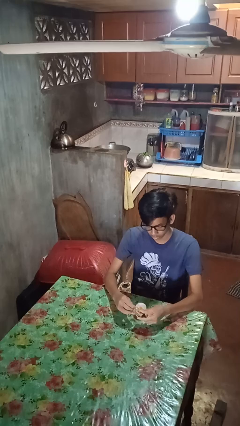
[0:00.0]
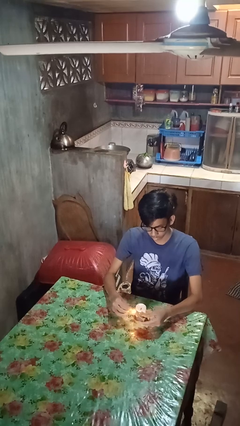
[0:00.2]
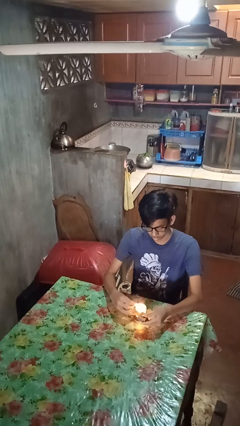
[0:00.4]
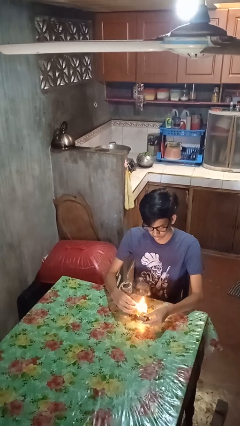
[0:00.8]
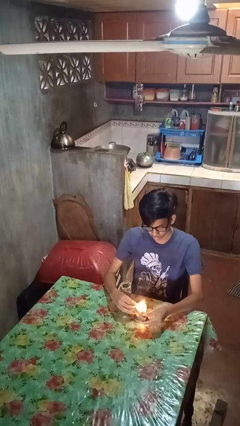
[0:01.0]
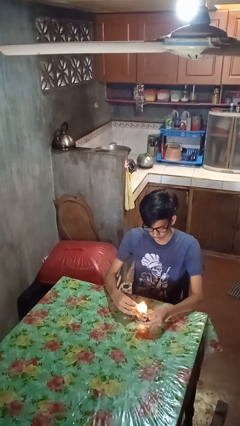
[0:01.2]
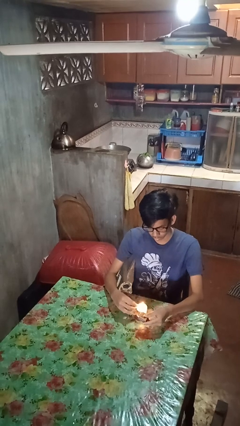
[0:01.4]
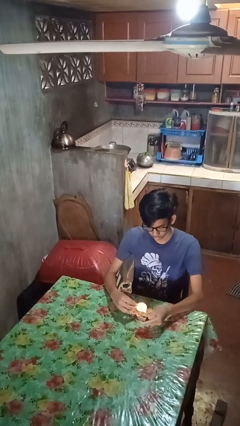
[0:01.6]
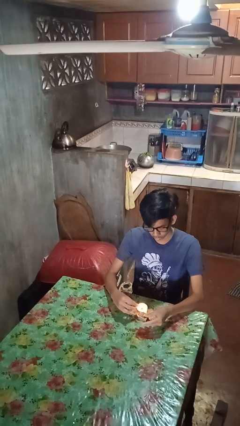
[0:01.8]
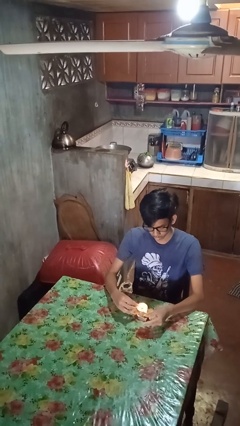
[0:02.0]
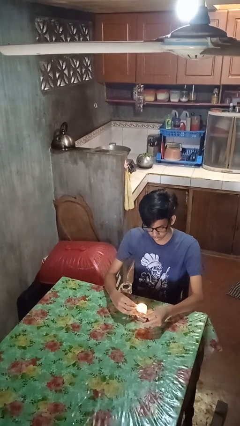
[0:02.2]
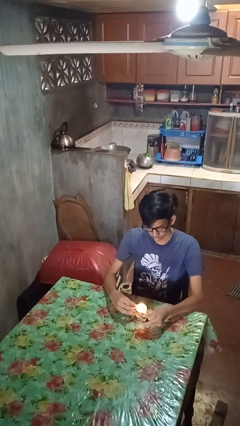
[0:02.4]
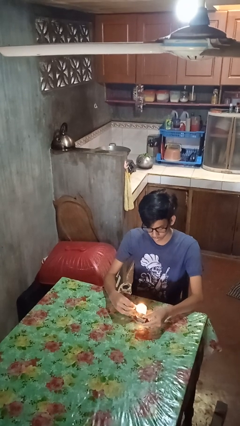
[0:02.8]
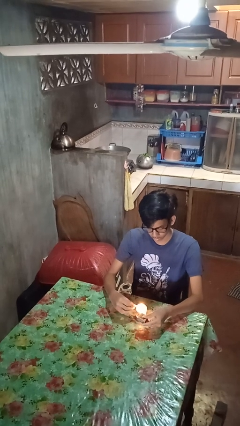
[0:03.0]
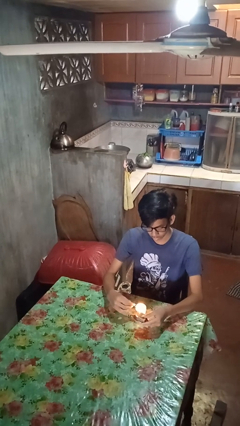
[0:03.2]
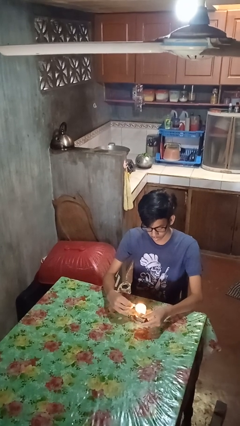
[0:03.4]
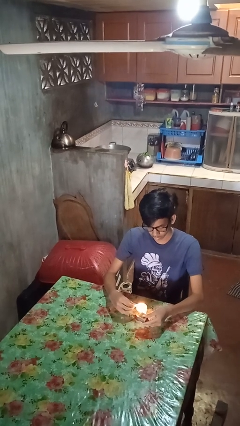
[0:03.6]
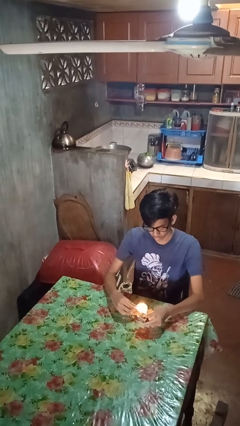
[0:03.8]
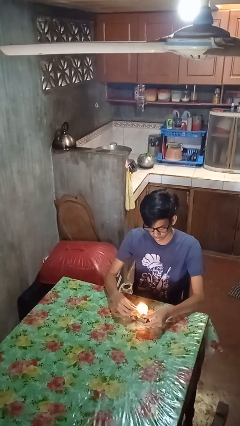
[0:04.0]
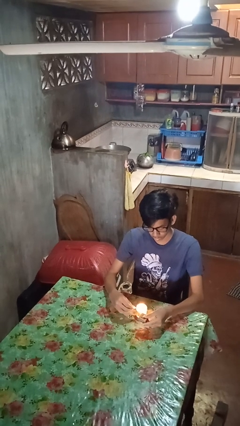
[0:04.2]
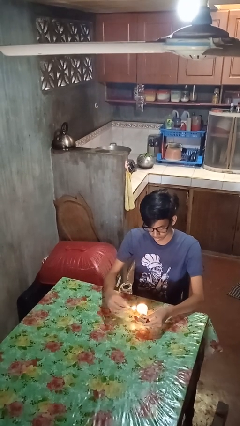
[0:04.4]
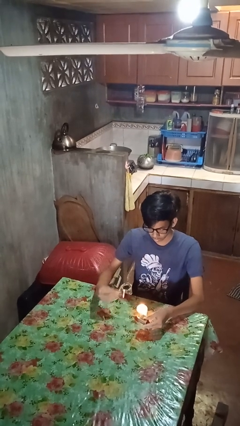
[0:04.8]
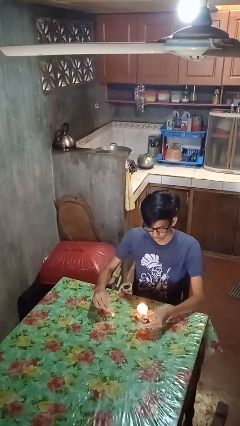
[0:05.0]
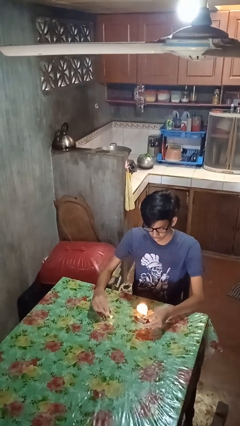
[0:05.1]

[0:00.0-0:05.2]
person lights candle

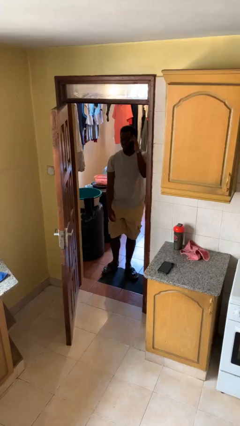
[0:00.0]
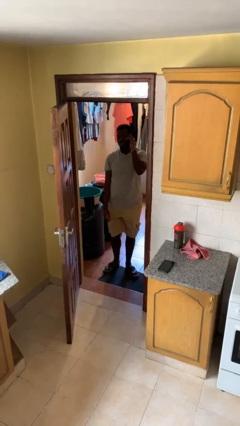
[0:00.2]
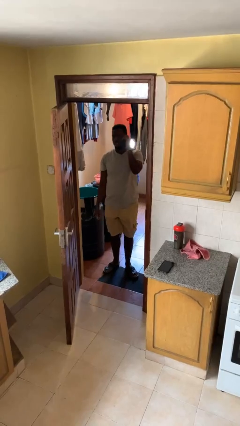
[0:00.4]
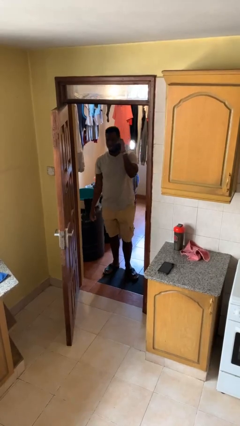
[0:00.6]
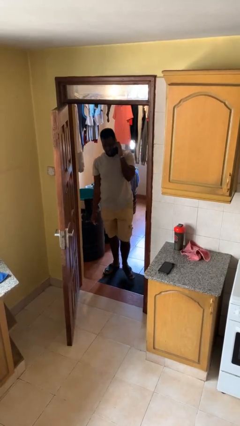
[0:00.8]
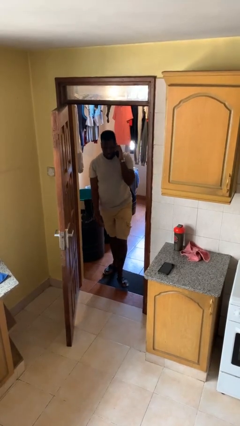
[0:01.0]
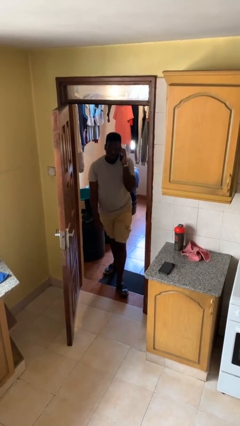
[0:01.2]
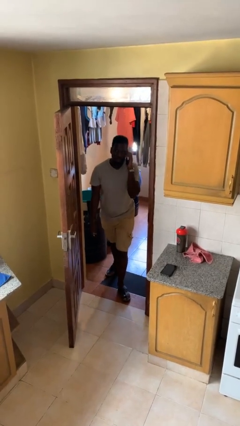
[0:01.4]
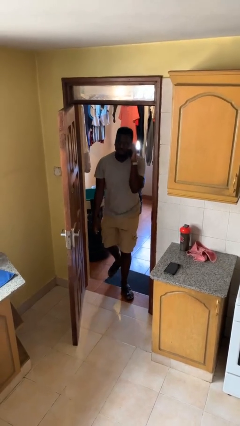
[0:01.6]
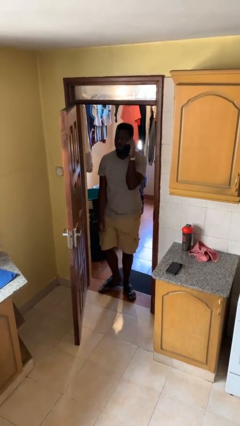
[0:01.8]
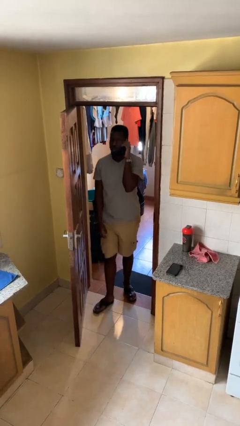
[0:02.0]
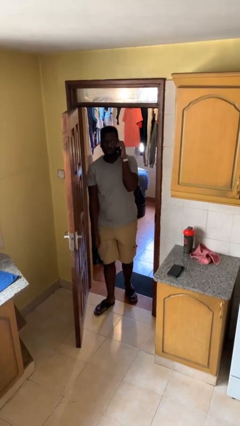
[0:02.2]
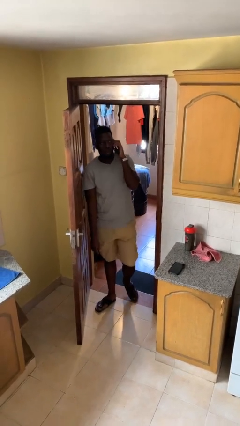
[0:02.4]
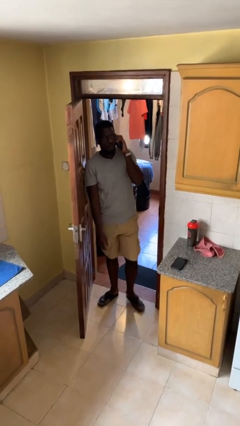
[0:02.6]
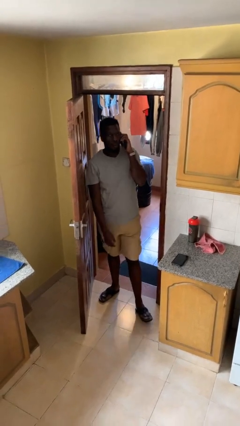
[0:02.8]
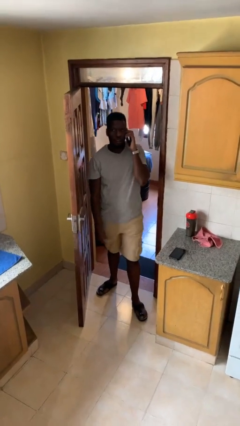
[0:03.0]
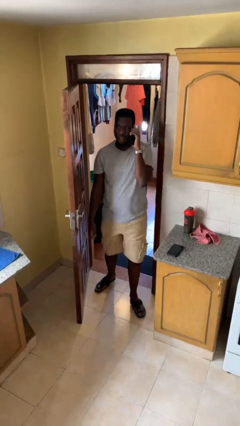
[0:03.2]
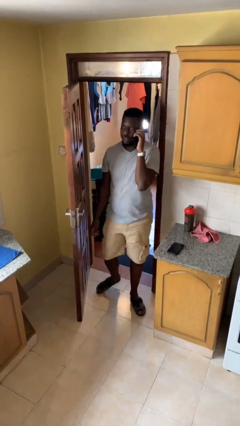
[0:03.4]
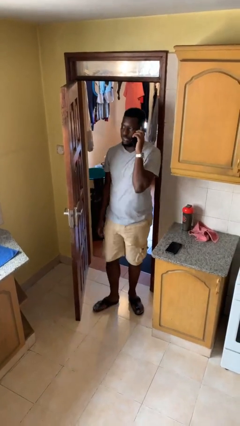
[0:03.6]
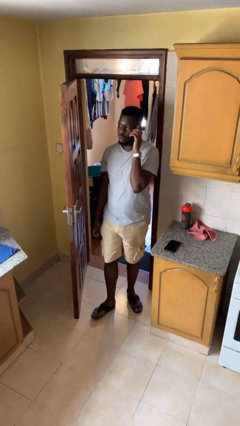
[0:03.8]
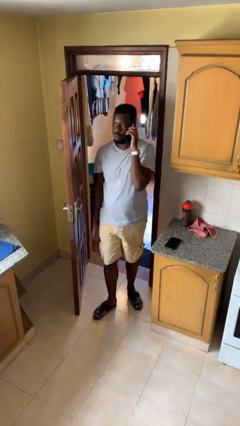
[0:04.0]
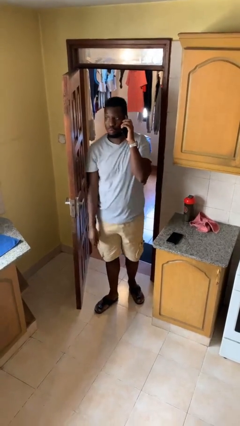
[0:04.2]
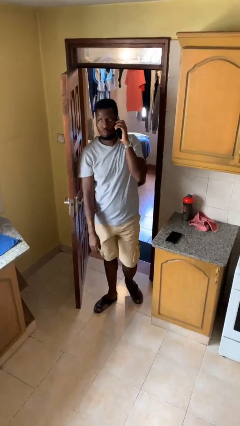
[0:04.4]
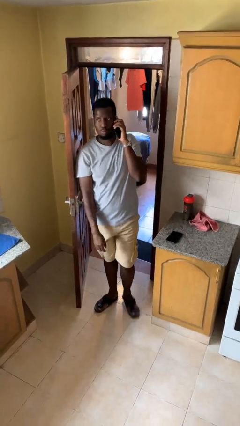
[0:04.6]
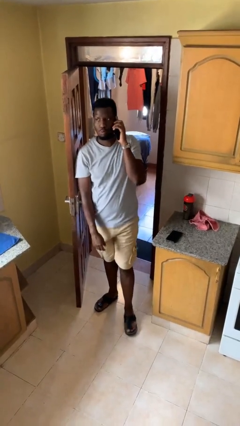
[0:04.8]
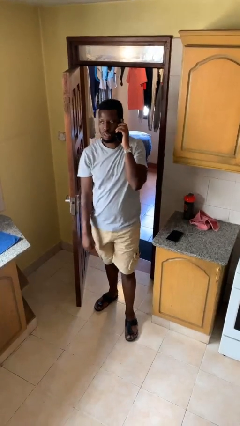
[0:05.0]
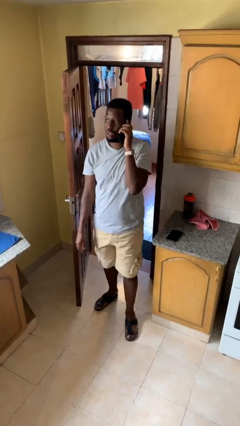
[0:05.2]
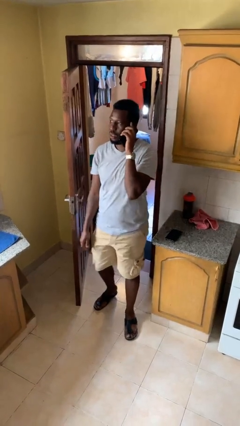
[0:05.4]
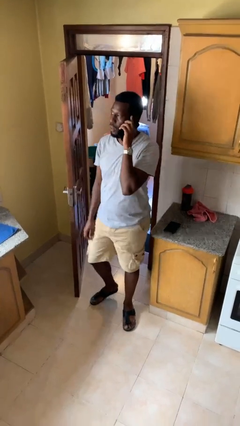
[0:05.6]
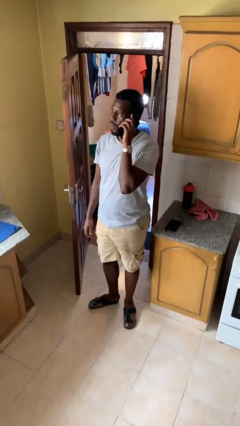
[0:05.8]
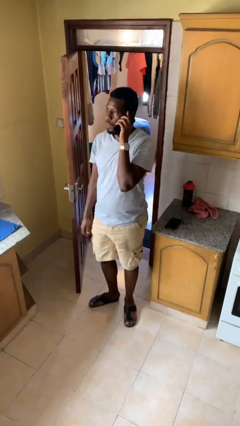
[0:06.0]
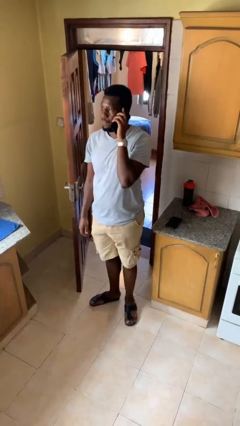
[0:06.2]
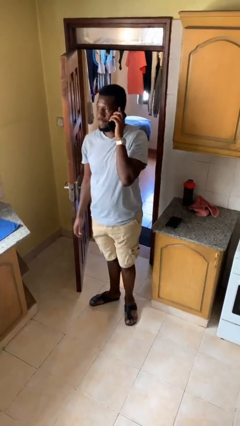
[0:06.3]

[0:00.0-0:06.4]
person enters scene through structure

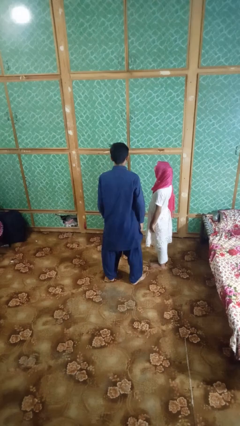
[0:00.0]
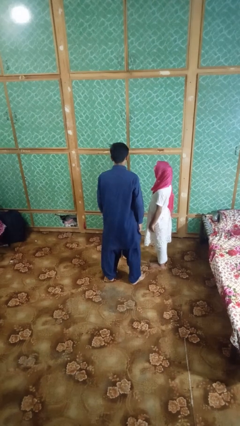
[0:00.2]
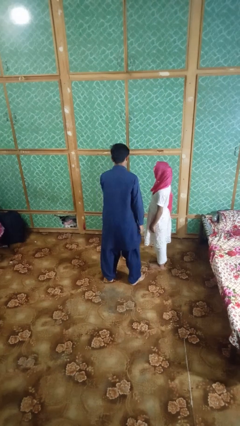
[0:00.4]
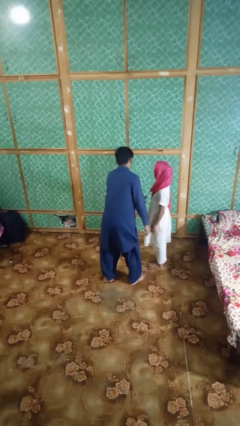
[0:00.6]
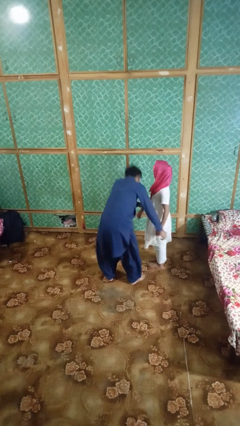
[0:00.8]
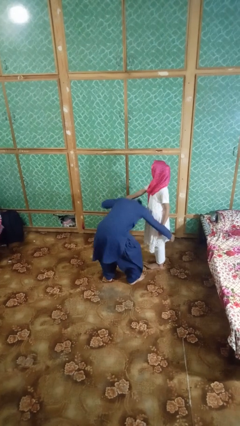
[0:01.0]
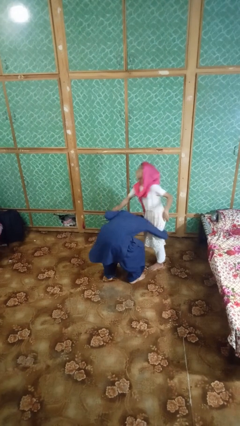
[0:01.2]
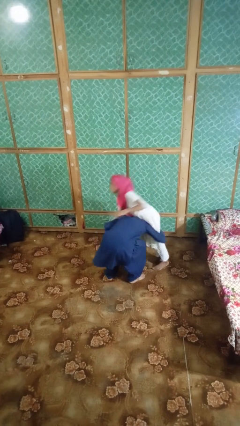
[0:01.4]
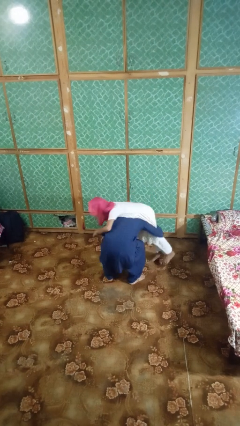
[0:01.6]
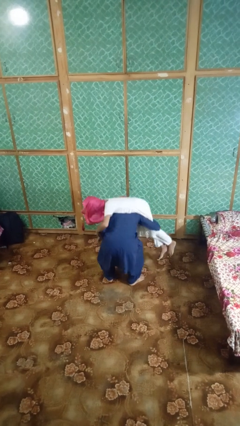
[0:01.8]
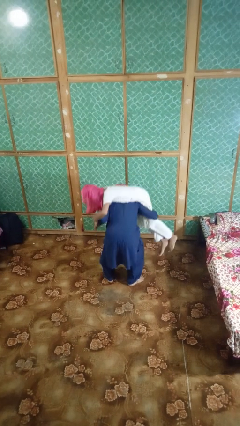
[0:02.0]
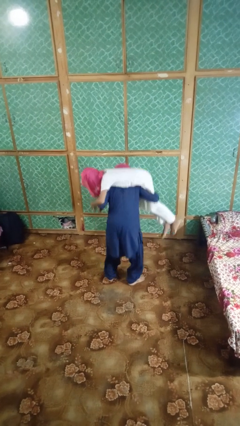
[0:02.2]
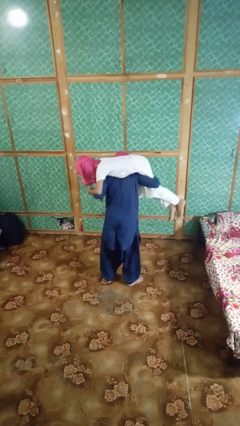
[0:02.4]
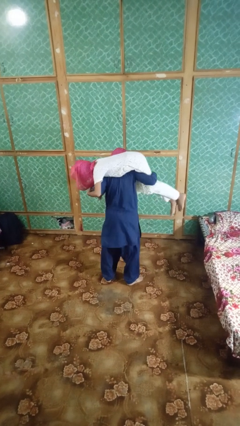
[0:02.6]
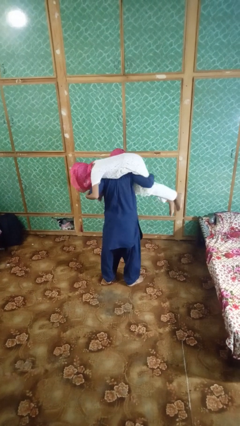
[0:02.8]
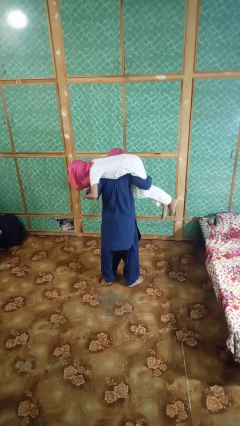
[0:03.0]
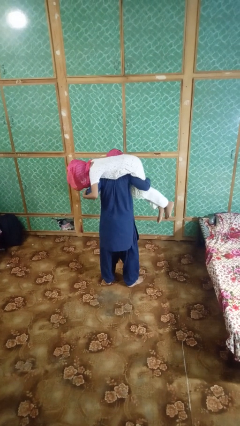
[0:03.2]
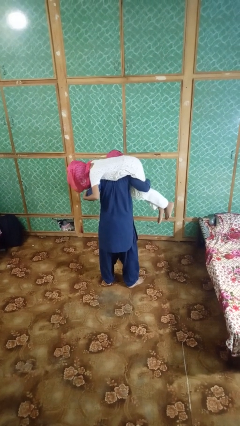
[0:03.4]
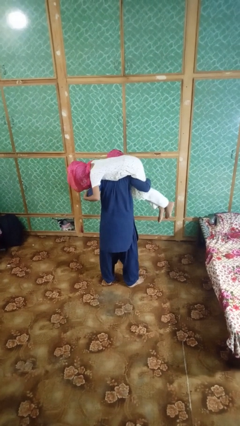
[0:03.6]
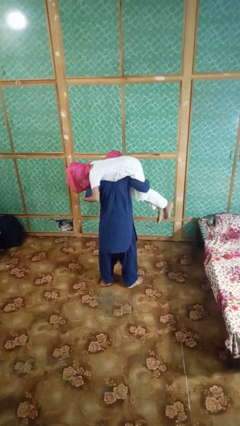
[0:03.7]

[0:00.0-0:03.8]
person carries person on shoulders

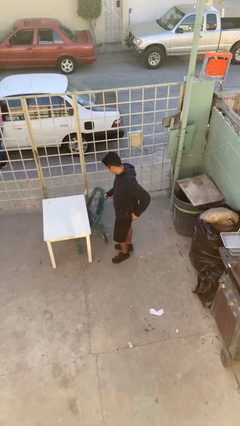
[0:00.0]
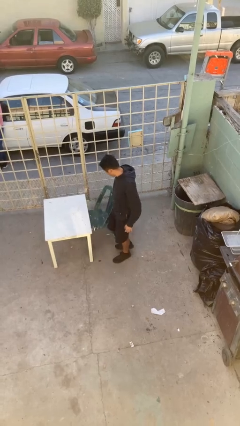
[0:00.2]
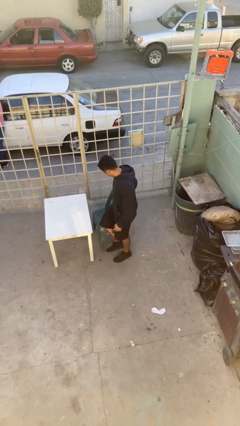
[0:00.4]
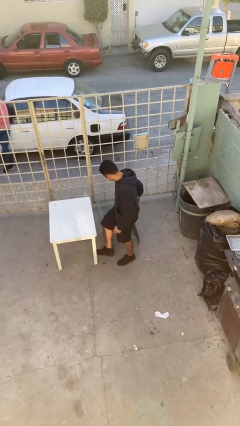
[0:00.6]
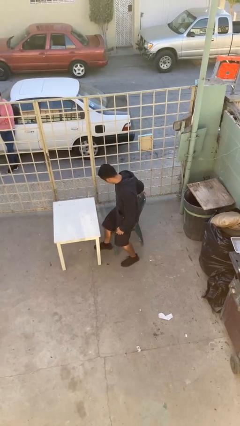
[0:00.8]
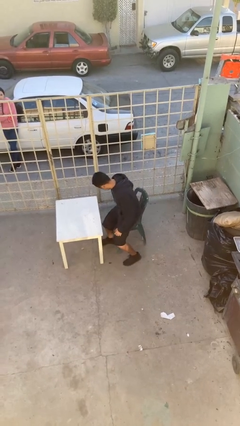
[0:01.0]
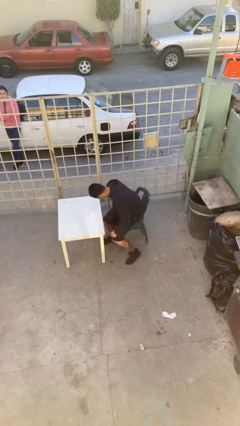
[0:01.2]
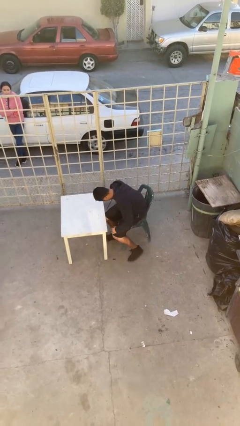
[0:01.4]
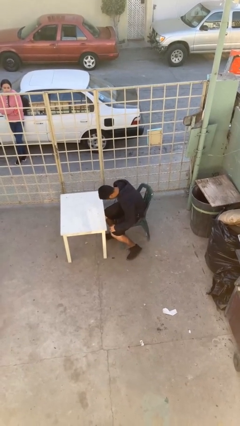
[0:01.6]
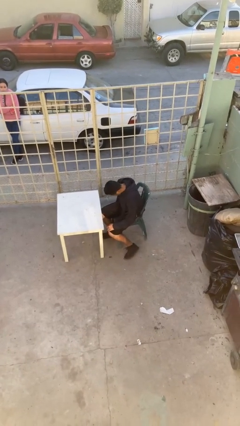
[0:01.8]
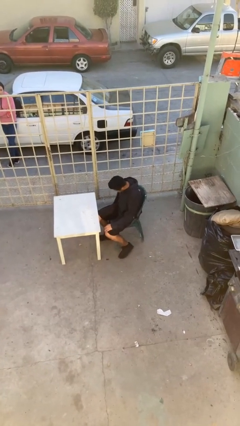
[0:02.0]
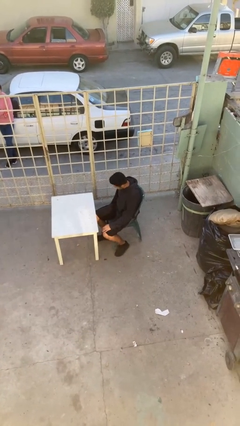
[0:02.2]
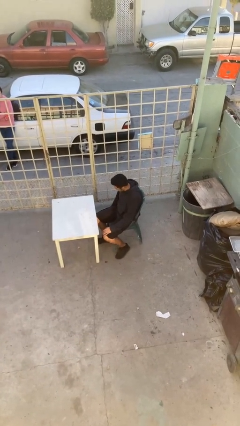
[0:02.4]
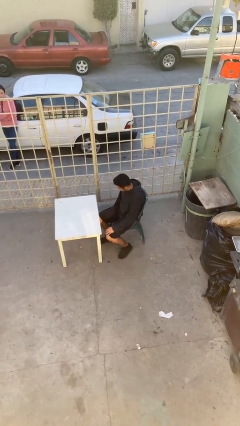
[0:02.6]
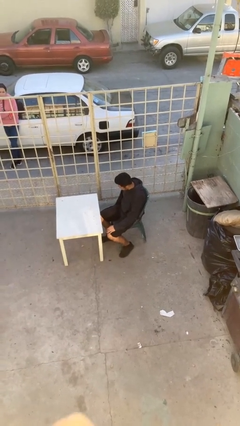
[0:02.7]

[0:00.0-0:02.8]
person sits down

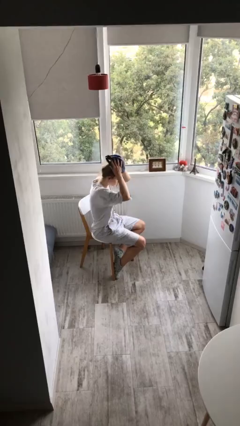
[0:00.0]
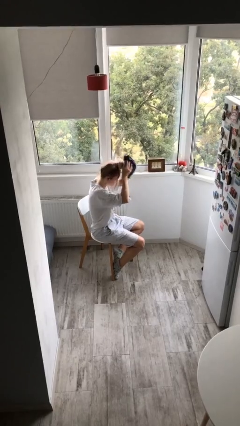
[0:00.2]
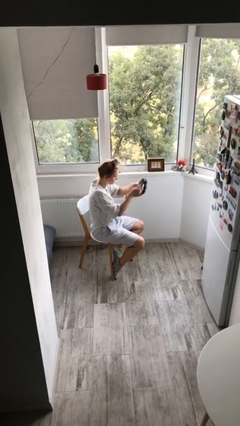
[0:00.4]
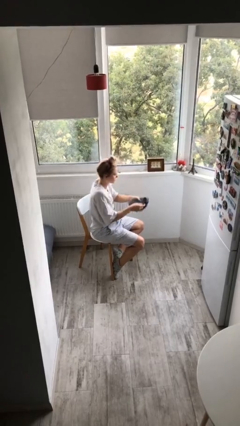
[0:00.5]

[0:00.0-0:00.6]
person takes off hat
